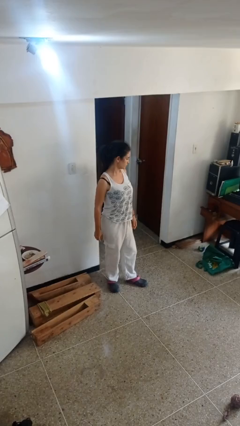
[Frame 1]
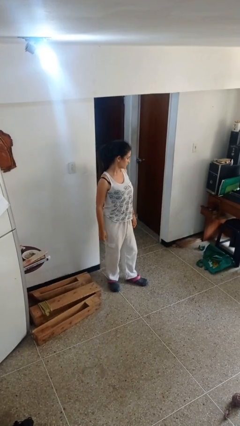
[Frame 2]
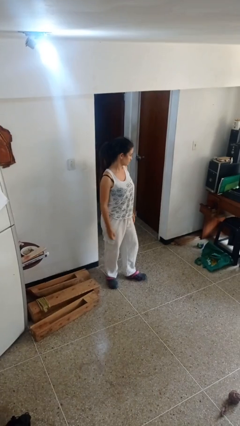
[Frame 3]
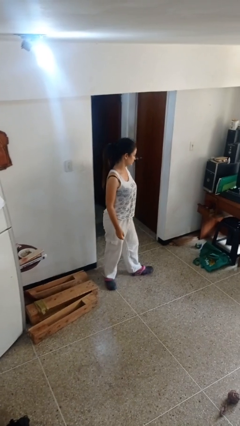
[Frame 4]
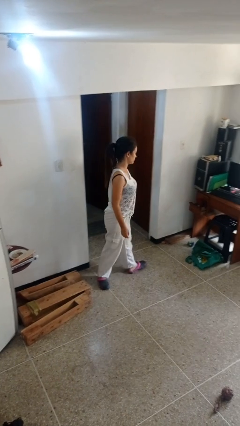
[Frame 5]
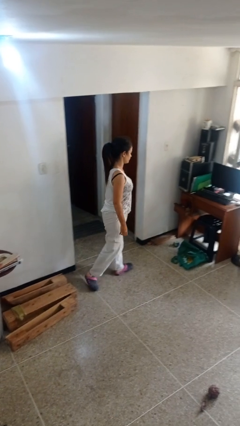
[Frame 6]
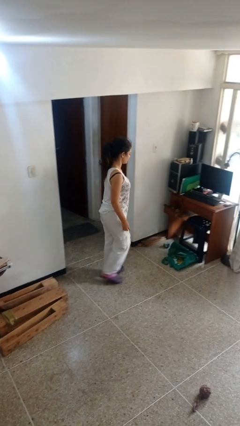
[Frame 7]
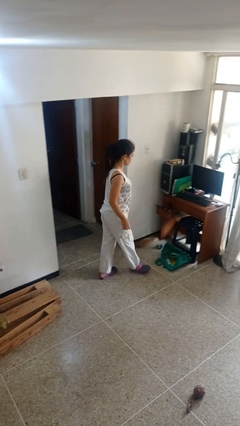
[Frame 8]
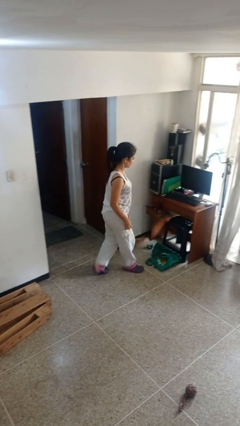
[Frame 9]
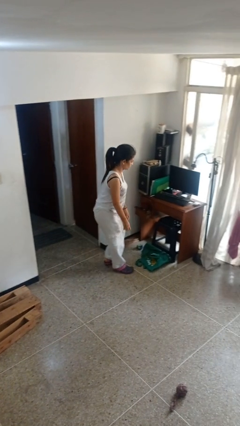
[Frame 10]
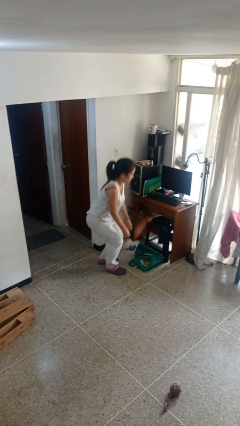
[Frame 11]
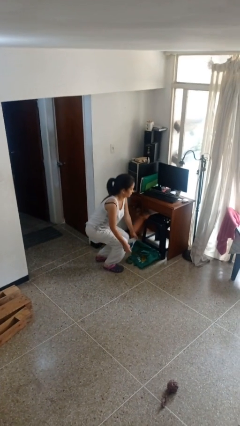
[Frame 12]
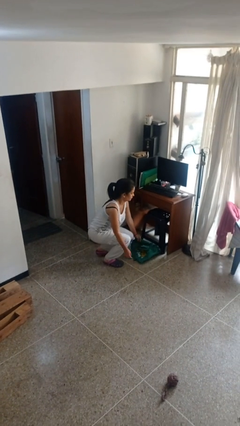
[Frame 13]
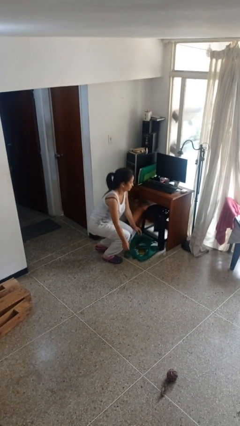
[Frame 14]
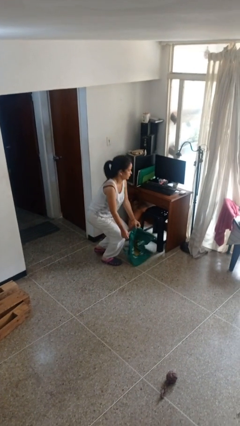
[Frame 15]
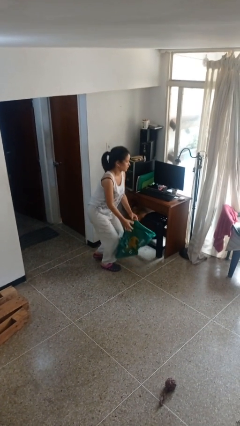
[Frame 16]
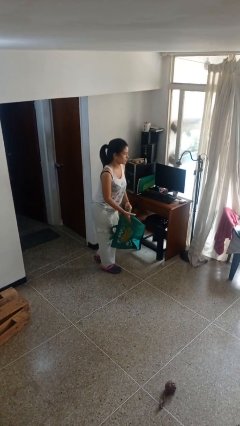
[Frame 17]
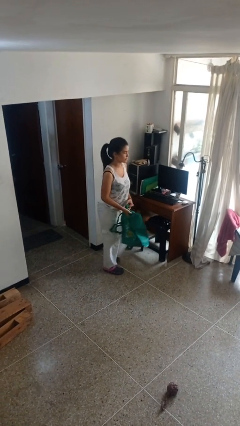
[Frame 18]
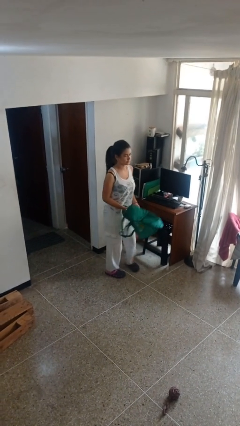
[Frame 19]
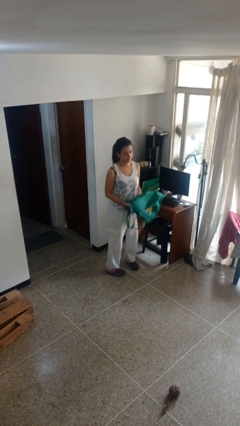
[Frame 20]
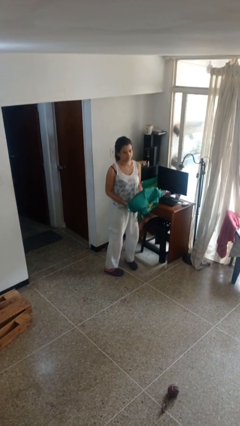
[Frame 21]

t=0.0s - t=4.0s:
person picks up object from floor

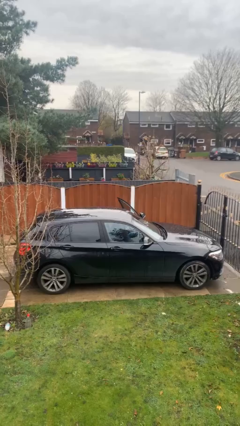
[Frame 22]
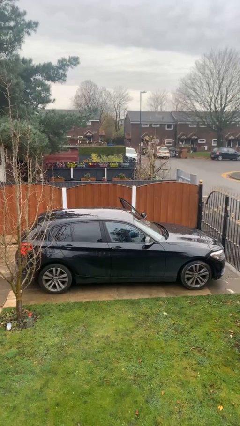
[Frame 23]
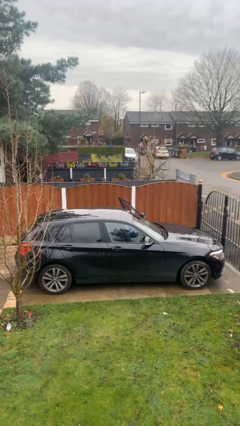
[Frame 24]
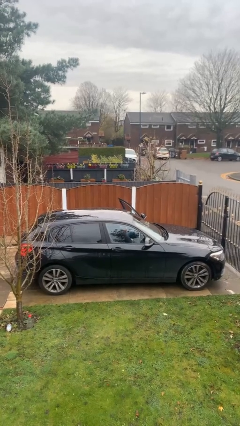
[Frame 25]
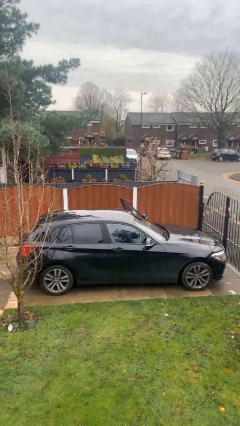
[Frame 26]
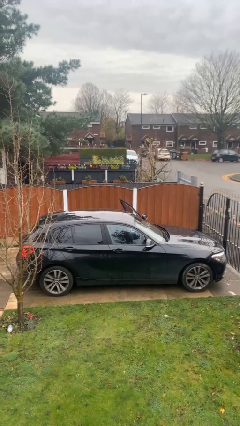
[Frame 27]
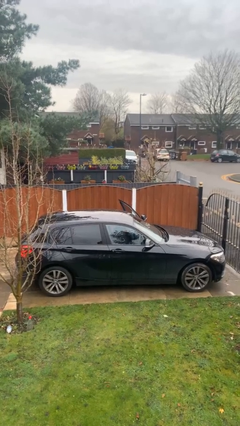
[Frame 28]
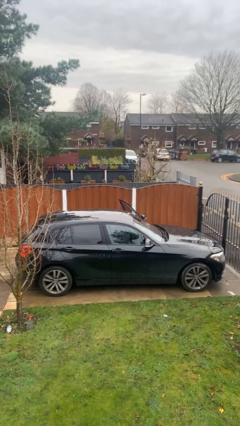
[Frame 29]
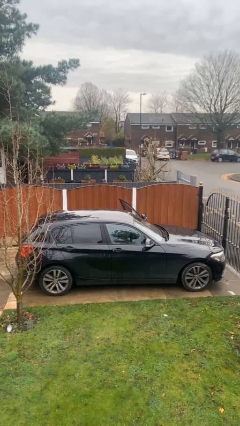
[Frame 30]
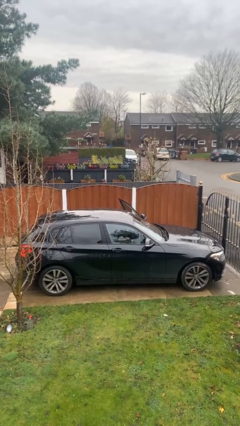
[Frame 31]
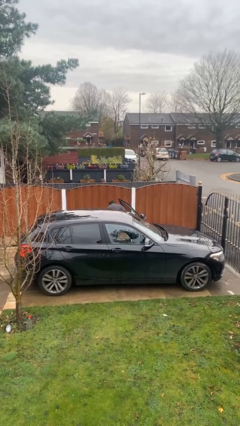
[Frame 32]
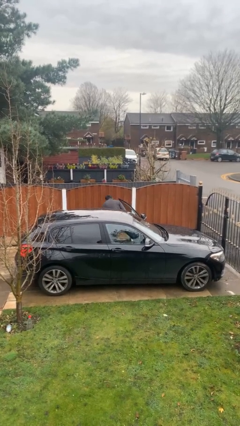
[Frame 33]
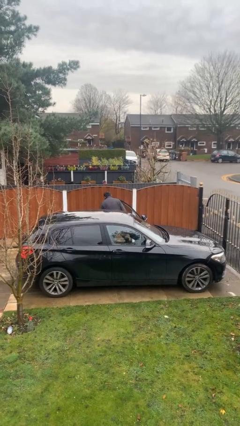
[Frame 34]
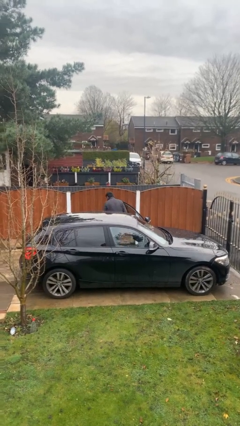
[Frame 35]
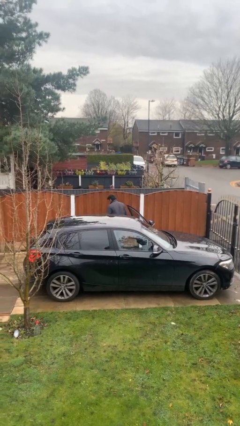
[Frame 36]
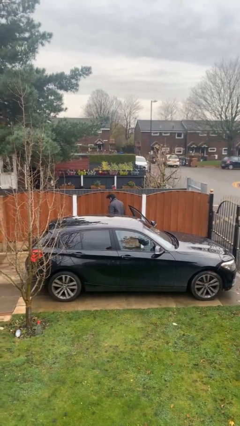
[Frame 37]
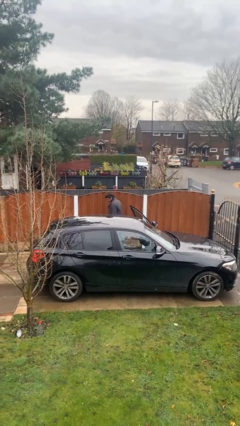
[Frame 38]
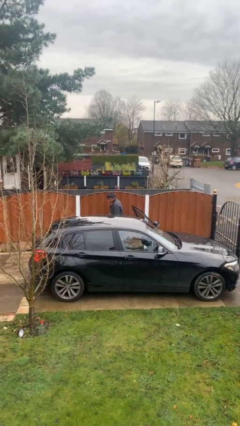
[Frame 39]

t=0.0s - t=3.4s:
person exits car

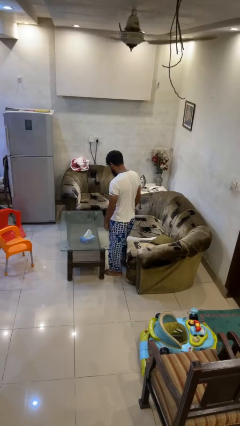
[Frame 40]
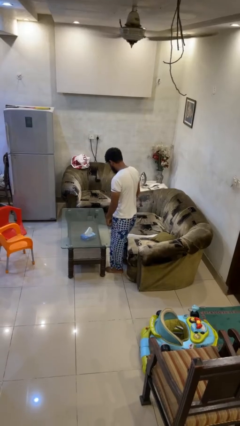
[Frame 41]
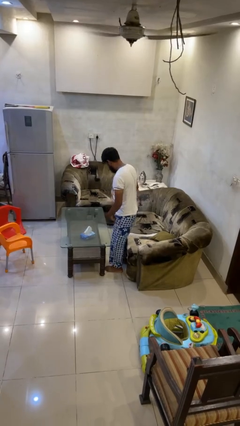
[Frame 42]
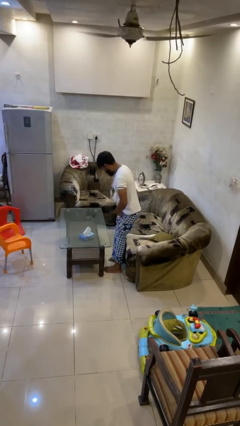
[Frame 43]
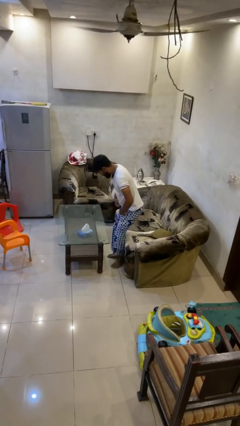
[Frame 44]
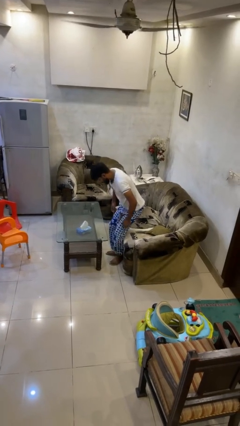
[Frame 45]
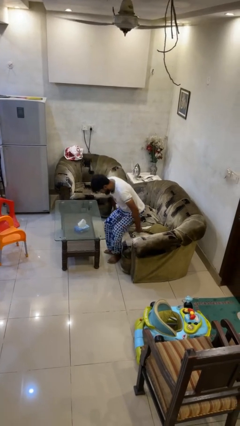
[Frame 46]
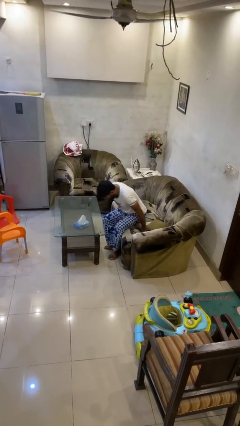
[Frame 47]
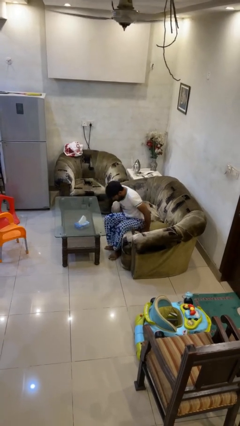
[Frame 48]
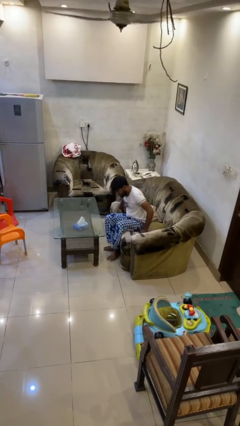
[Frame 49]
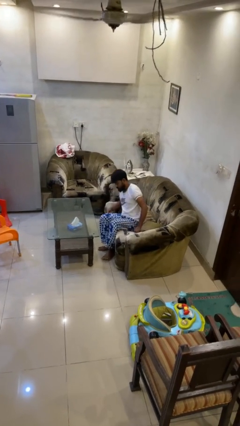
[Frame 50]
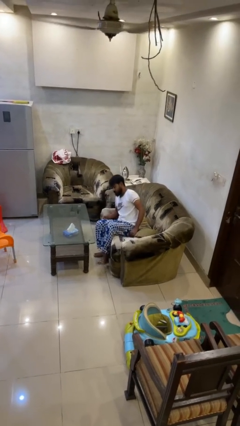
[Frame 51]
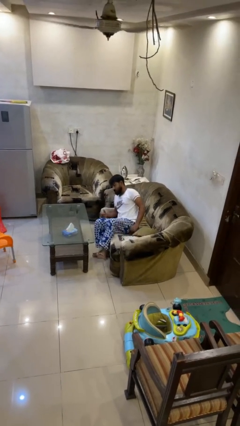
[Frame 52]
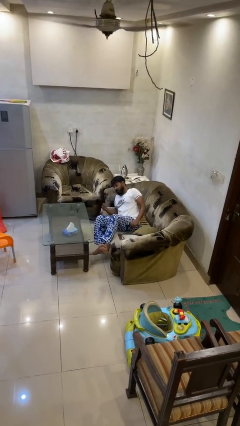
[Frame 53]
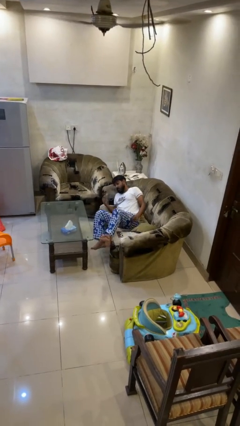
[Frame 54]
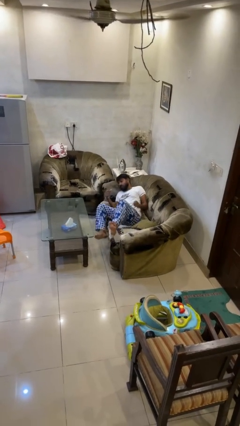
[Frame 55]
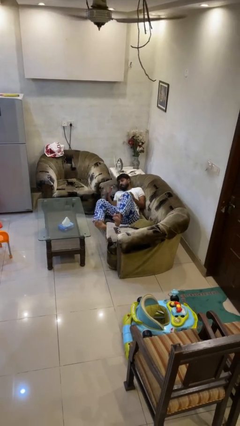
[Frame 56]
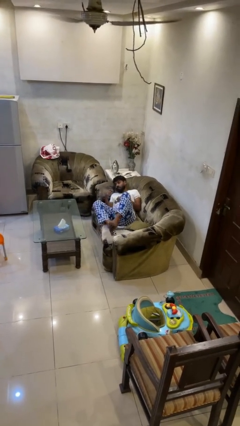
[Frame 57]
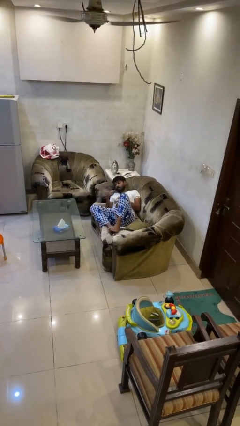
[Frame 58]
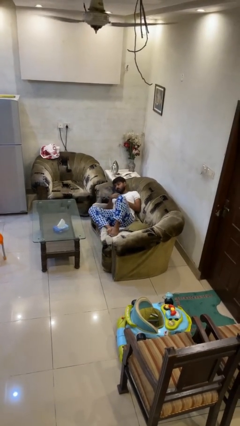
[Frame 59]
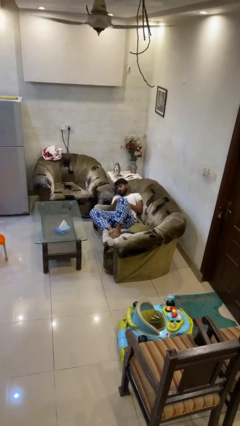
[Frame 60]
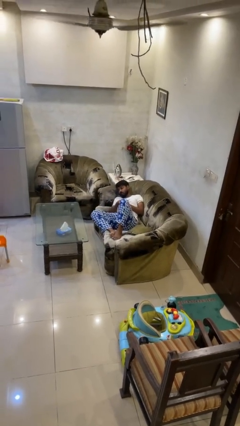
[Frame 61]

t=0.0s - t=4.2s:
person lies down on couch

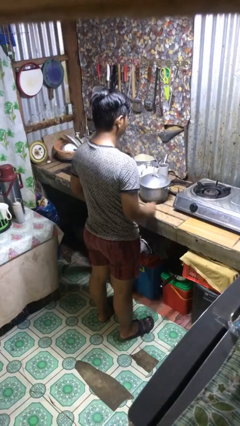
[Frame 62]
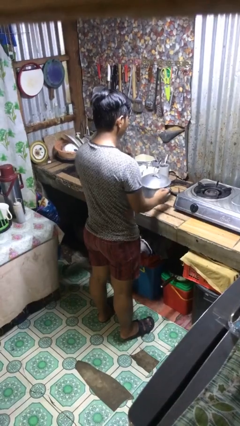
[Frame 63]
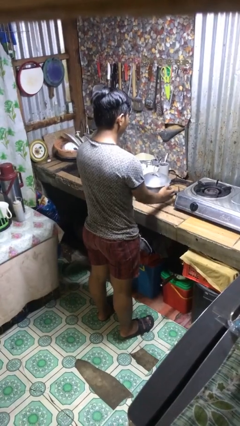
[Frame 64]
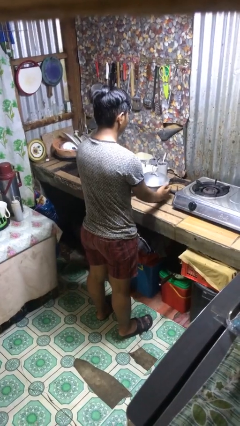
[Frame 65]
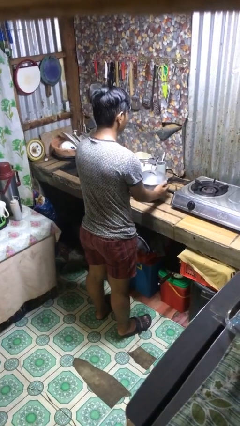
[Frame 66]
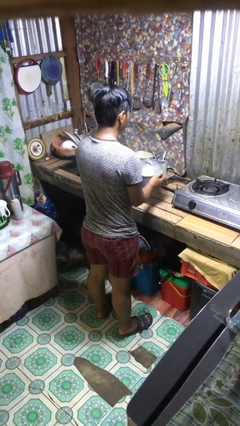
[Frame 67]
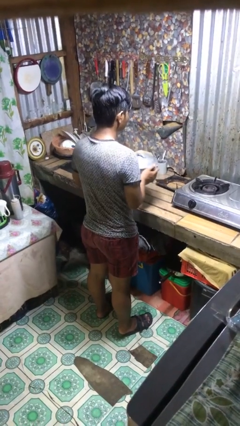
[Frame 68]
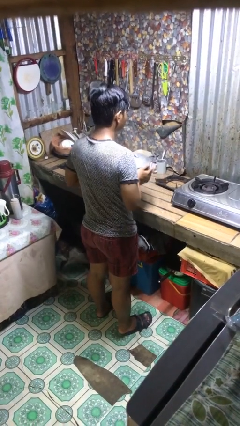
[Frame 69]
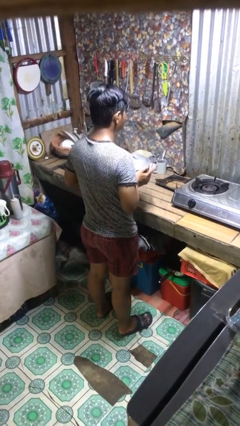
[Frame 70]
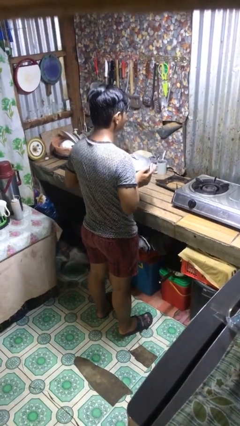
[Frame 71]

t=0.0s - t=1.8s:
person picks up object from countertop

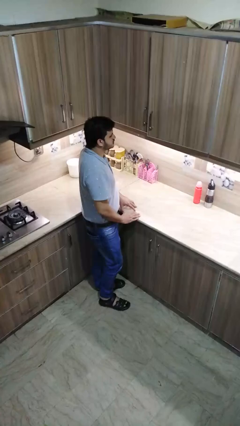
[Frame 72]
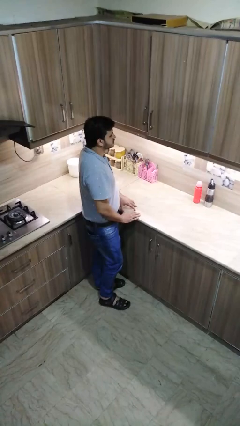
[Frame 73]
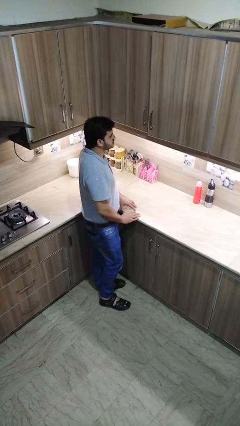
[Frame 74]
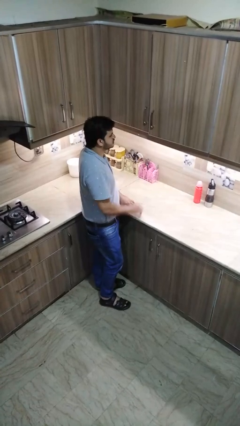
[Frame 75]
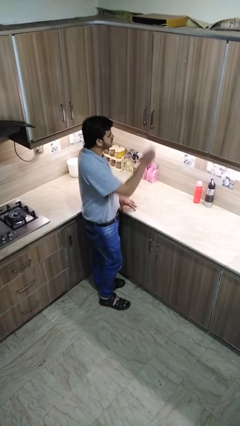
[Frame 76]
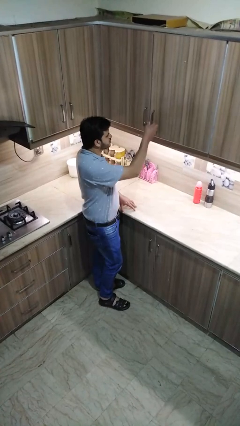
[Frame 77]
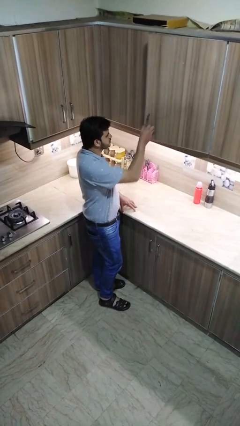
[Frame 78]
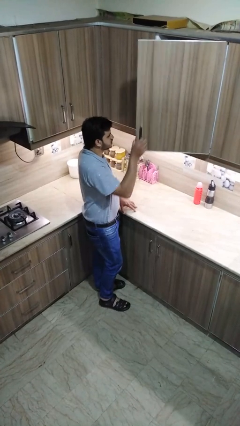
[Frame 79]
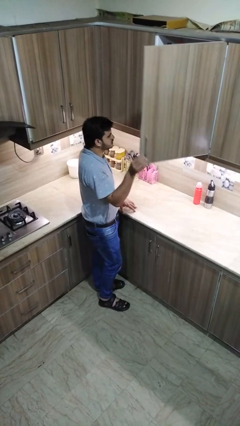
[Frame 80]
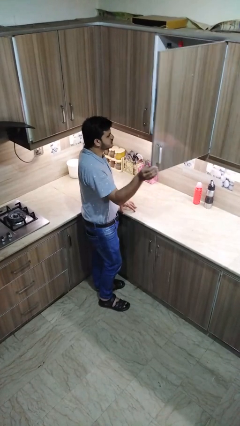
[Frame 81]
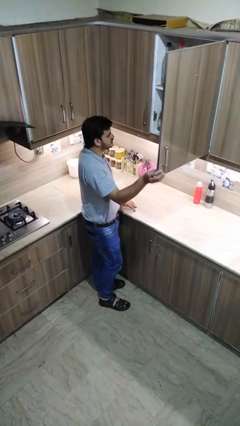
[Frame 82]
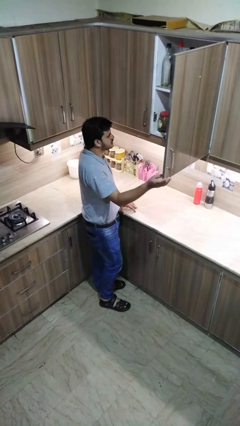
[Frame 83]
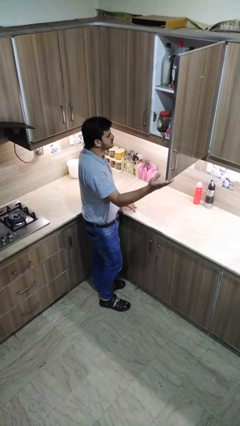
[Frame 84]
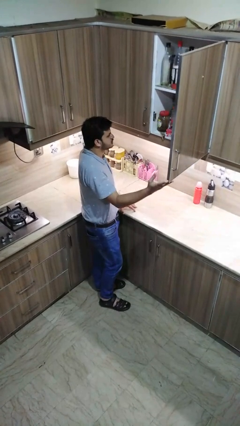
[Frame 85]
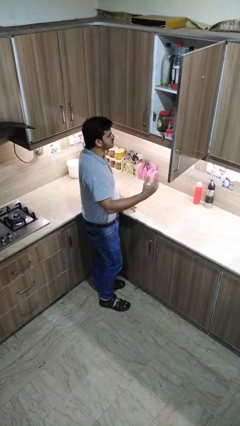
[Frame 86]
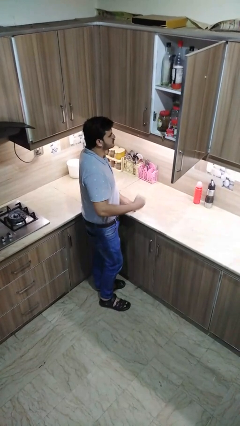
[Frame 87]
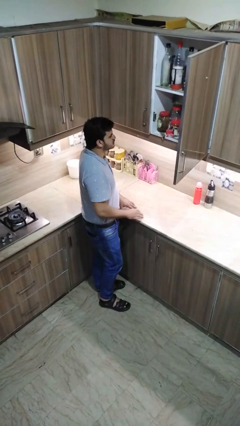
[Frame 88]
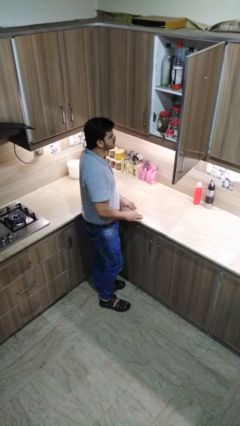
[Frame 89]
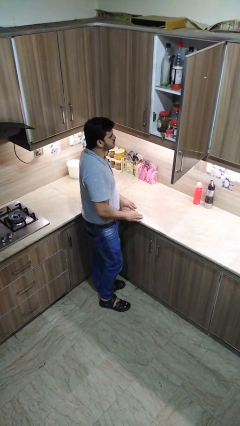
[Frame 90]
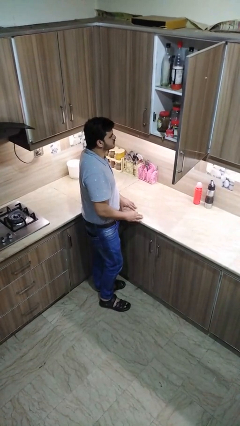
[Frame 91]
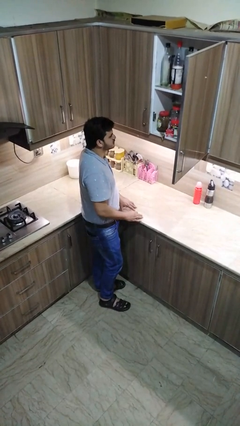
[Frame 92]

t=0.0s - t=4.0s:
person opens cabinet

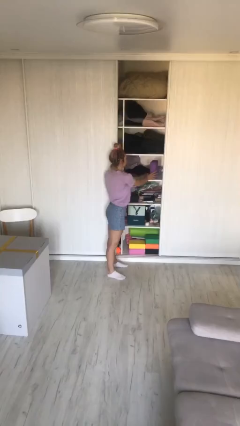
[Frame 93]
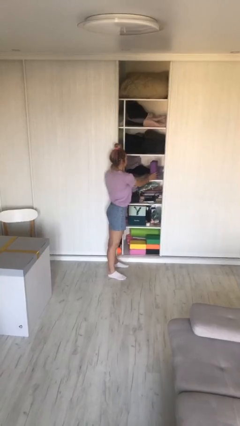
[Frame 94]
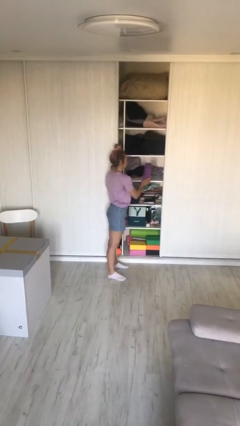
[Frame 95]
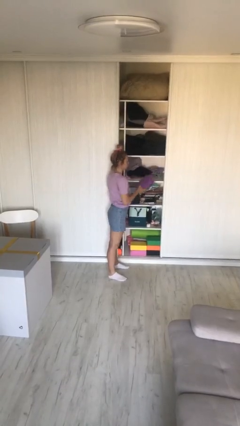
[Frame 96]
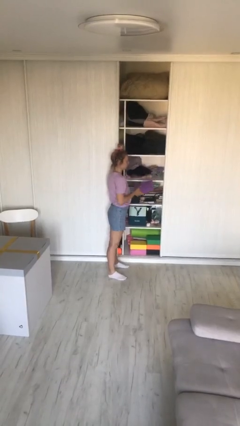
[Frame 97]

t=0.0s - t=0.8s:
person picks up object from cabinet
